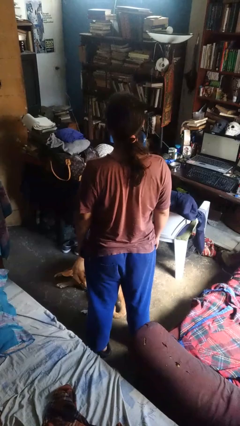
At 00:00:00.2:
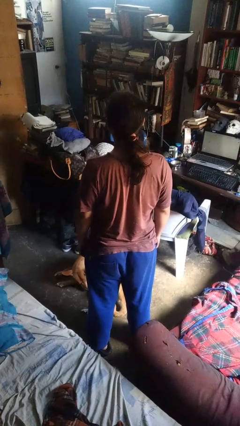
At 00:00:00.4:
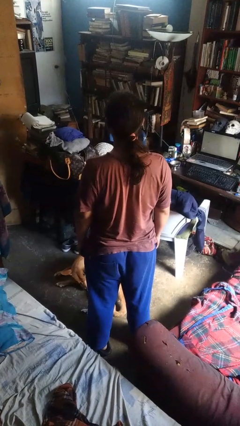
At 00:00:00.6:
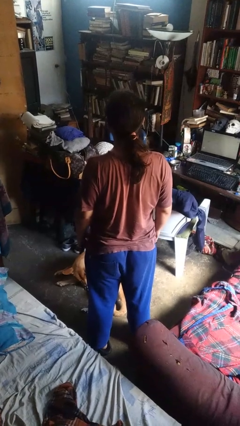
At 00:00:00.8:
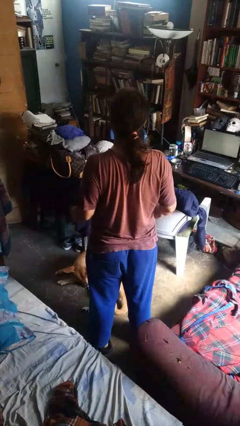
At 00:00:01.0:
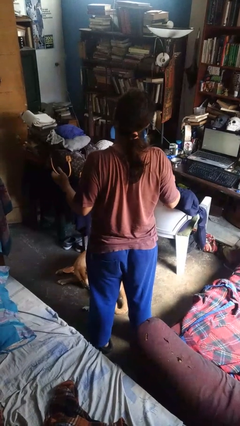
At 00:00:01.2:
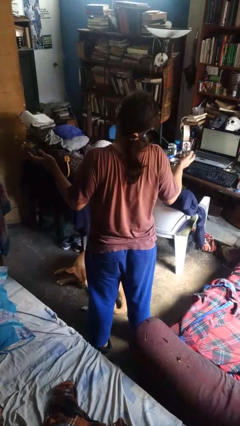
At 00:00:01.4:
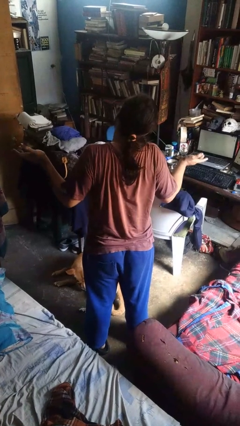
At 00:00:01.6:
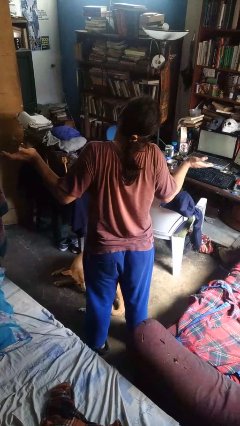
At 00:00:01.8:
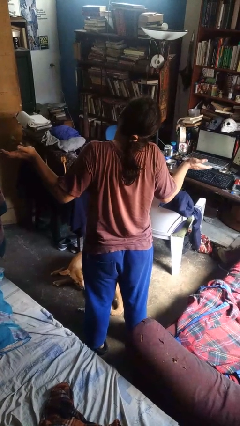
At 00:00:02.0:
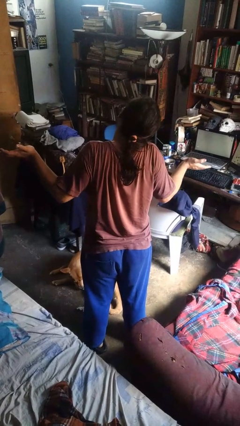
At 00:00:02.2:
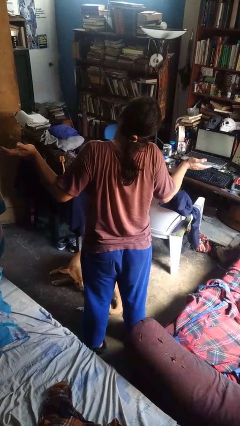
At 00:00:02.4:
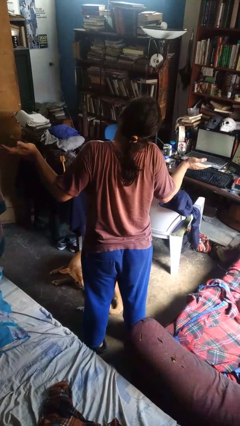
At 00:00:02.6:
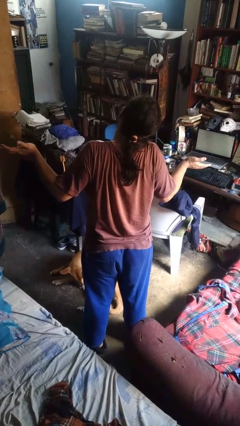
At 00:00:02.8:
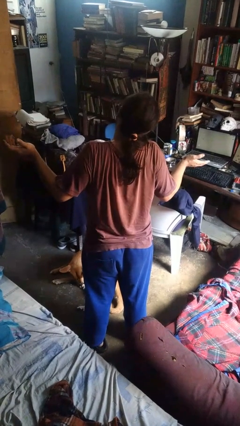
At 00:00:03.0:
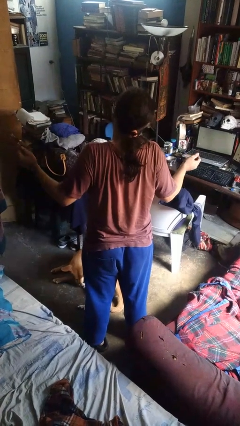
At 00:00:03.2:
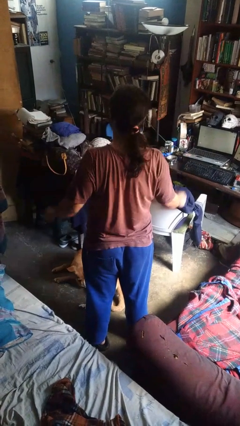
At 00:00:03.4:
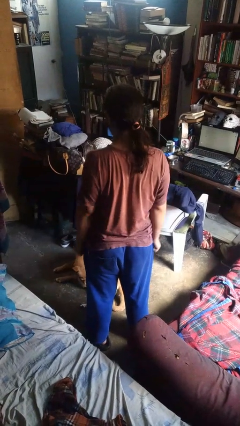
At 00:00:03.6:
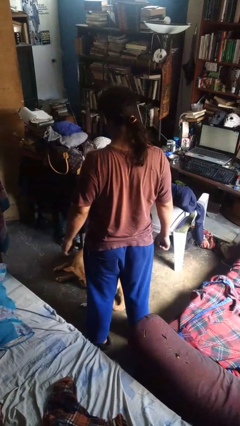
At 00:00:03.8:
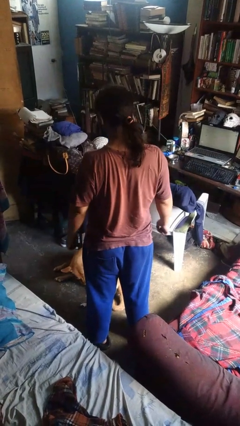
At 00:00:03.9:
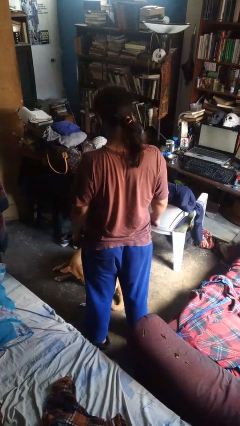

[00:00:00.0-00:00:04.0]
person shrugs

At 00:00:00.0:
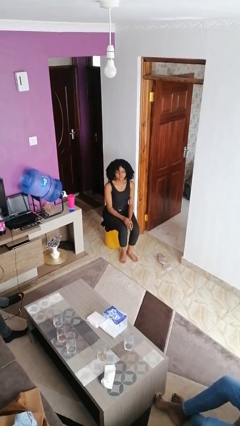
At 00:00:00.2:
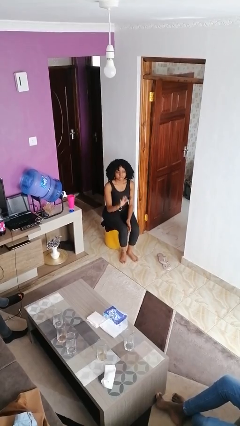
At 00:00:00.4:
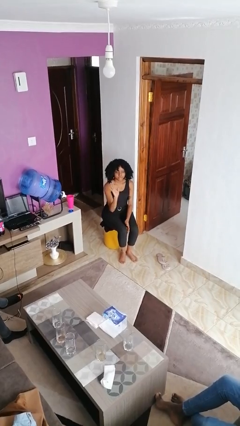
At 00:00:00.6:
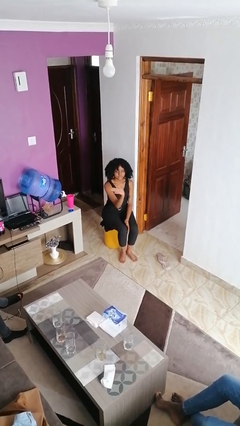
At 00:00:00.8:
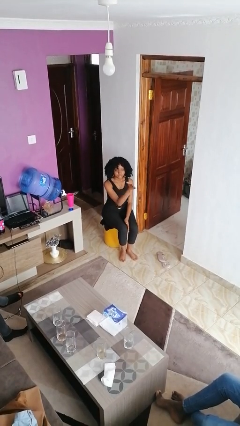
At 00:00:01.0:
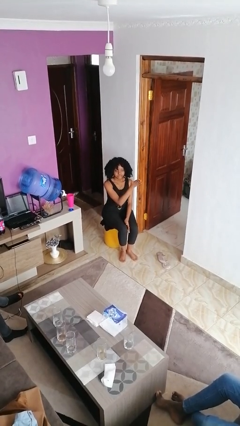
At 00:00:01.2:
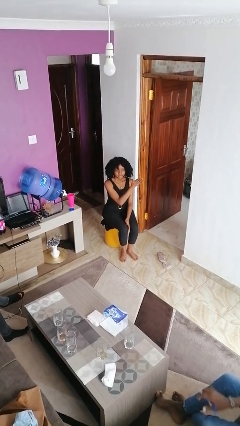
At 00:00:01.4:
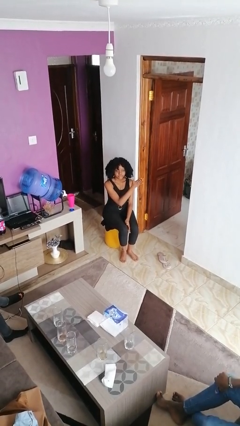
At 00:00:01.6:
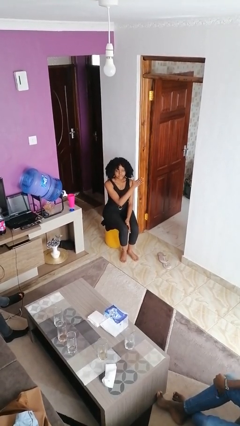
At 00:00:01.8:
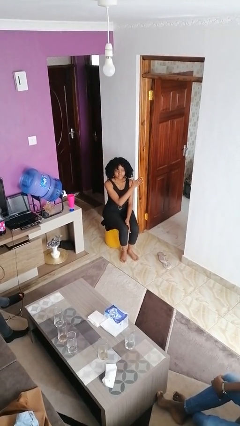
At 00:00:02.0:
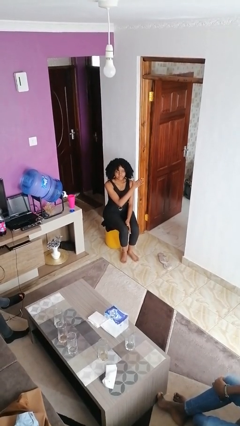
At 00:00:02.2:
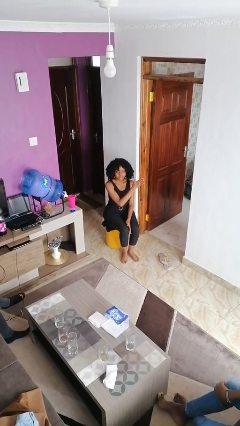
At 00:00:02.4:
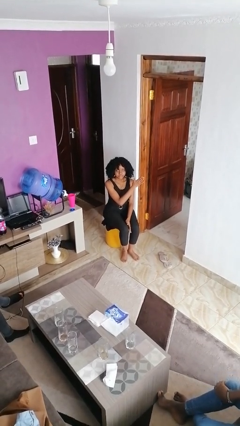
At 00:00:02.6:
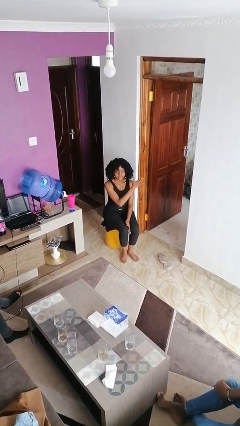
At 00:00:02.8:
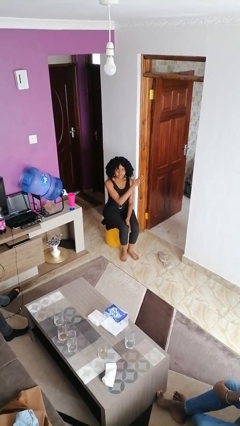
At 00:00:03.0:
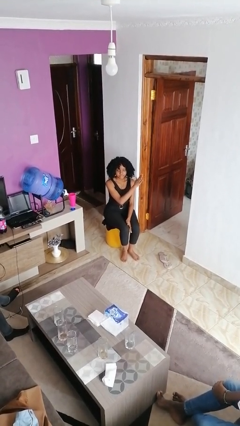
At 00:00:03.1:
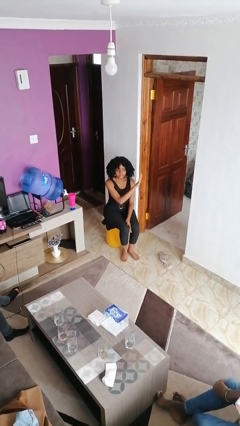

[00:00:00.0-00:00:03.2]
person gestures swipe left

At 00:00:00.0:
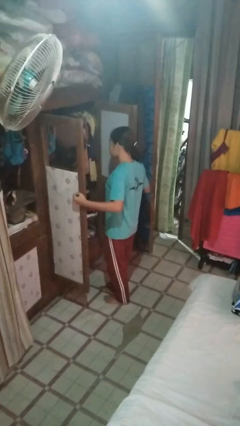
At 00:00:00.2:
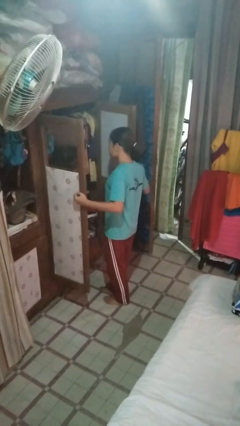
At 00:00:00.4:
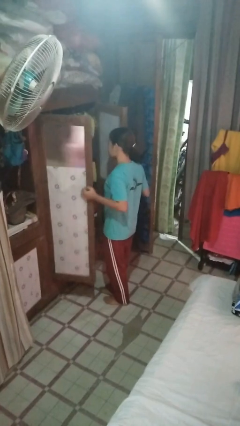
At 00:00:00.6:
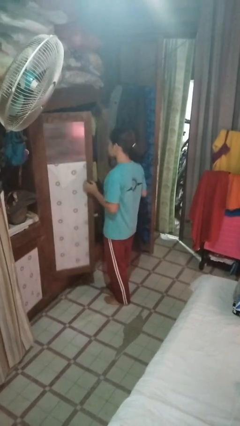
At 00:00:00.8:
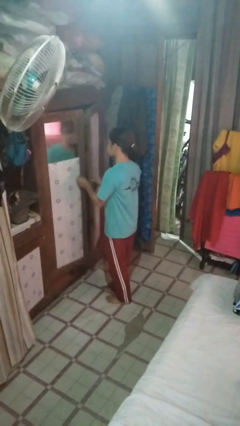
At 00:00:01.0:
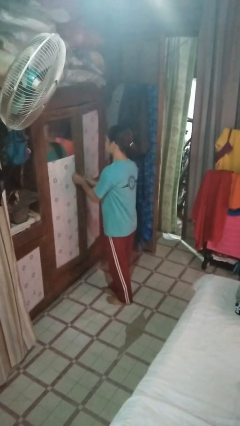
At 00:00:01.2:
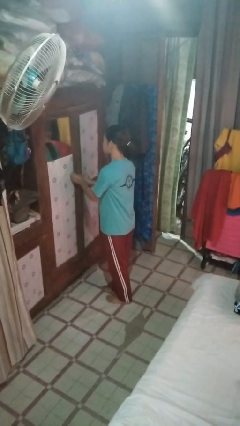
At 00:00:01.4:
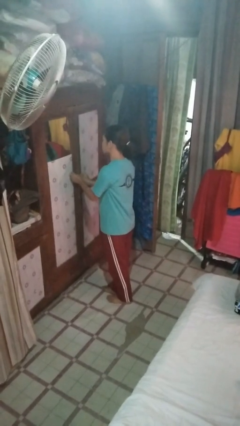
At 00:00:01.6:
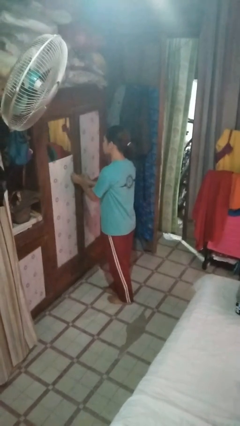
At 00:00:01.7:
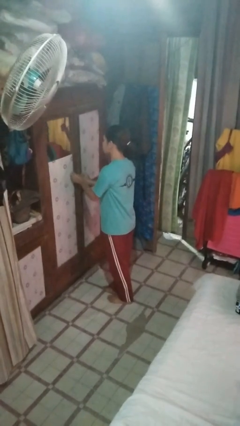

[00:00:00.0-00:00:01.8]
person closes closet door

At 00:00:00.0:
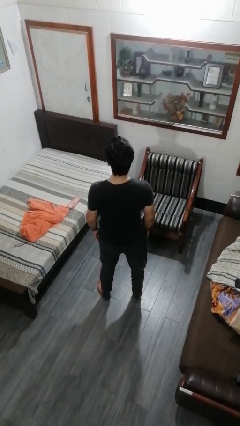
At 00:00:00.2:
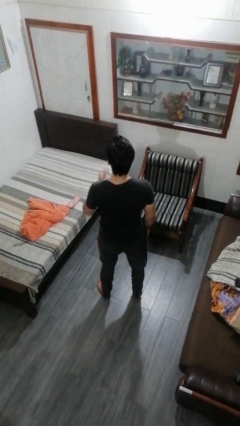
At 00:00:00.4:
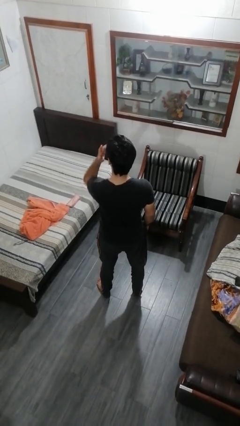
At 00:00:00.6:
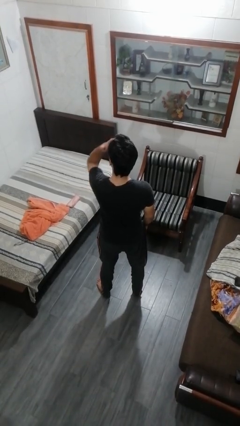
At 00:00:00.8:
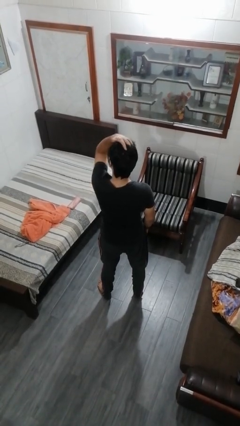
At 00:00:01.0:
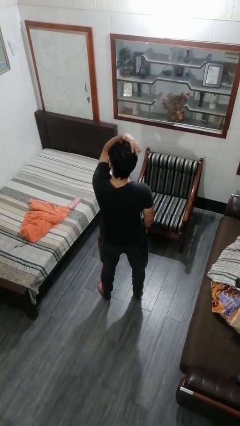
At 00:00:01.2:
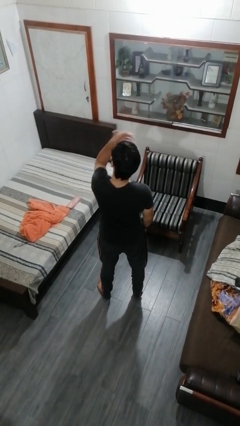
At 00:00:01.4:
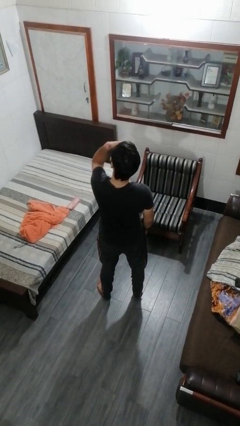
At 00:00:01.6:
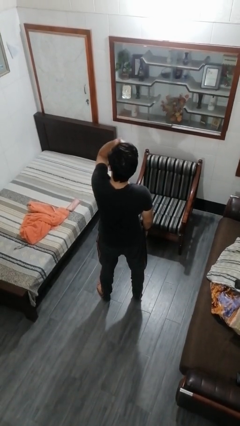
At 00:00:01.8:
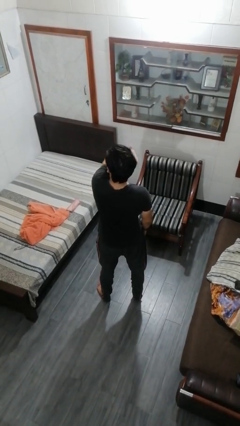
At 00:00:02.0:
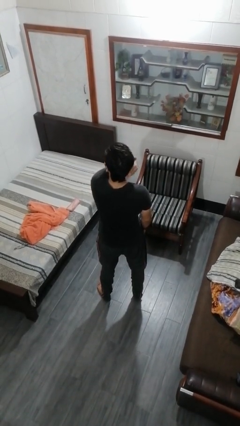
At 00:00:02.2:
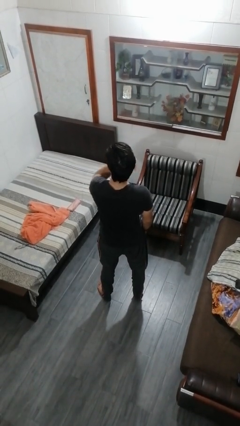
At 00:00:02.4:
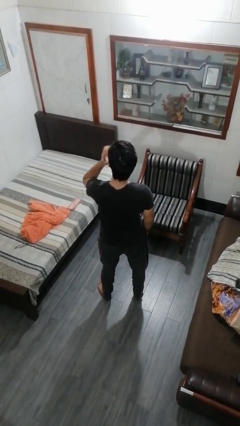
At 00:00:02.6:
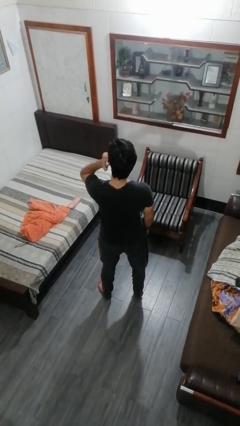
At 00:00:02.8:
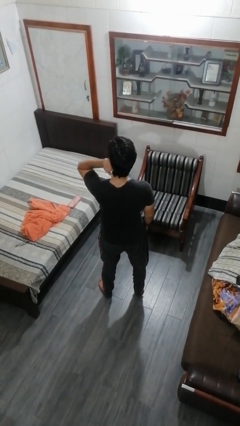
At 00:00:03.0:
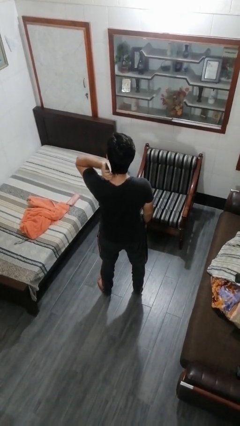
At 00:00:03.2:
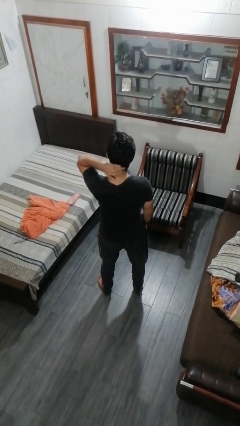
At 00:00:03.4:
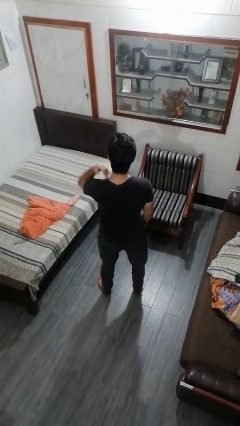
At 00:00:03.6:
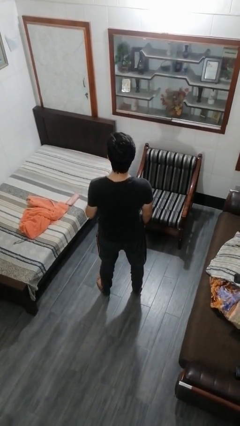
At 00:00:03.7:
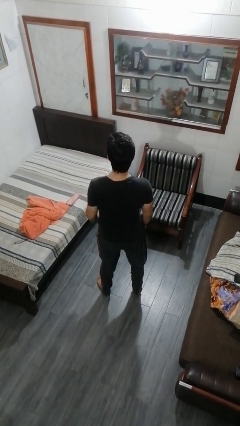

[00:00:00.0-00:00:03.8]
person strokes hair

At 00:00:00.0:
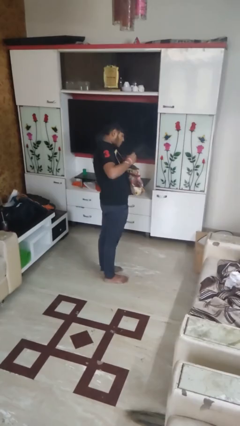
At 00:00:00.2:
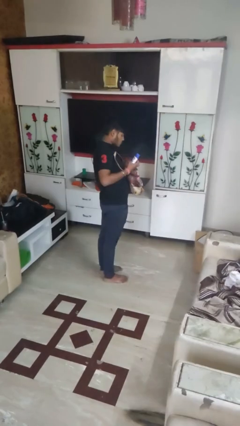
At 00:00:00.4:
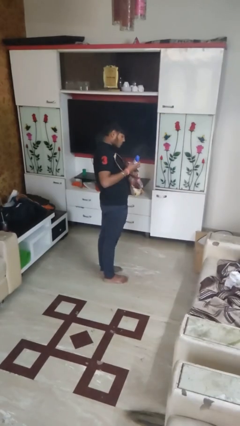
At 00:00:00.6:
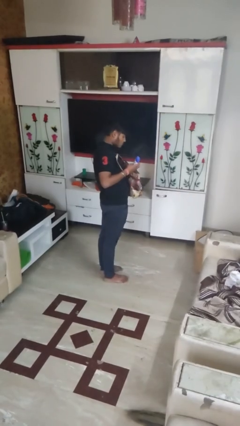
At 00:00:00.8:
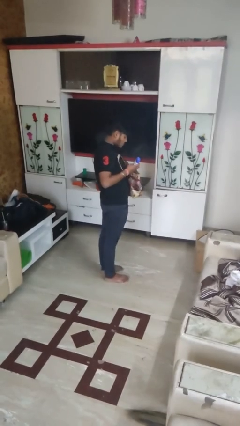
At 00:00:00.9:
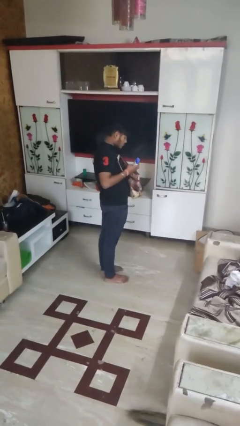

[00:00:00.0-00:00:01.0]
person takes object from purse

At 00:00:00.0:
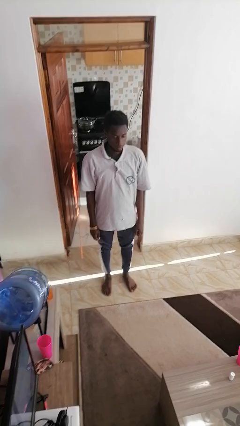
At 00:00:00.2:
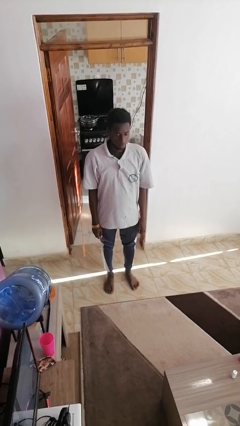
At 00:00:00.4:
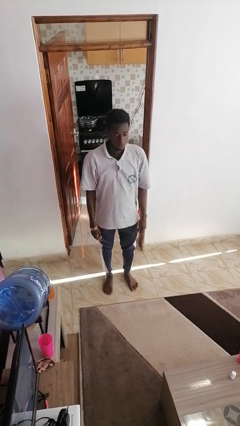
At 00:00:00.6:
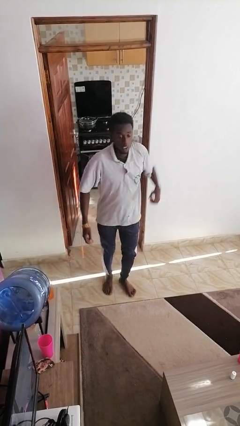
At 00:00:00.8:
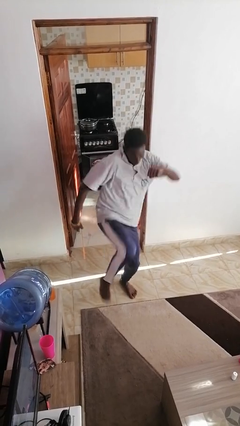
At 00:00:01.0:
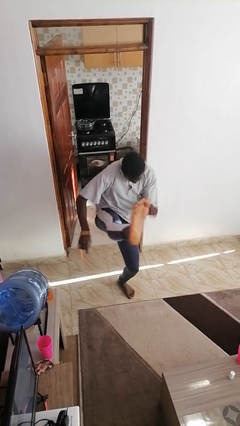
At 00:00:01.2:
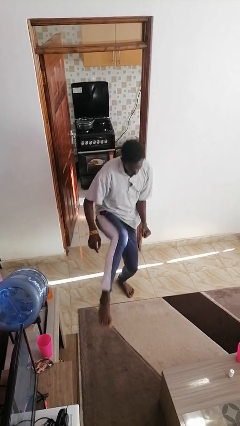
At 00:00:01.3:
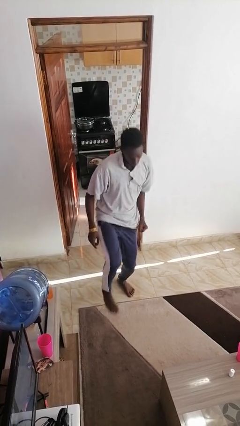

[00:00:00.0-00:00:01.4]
person karate kicks

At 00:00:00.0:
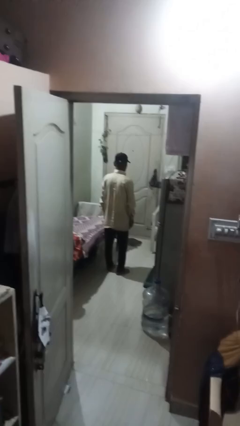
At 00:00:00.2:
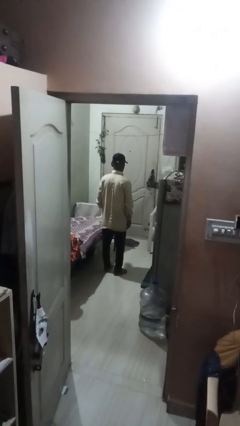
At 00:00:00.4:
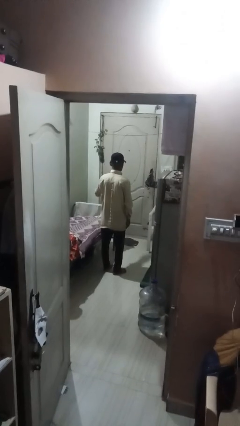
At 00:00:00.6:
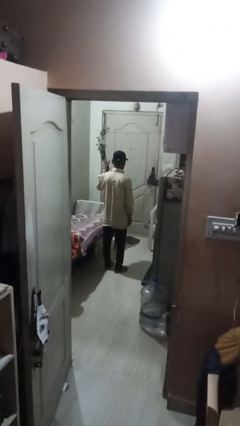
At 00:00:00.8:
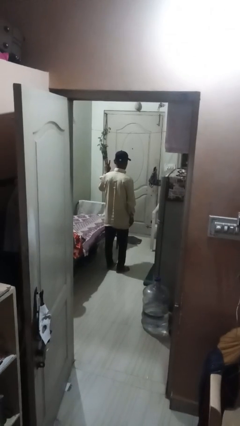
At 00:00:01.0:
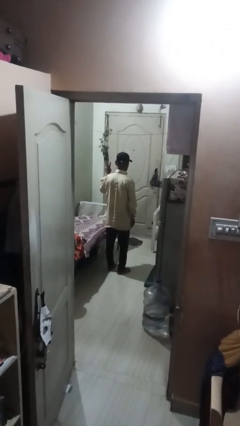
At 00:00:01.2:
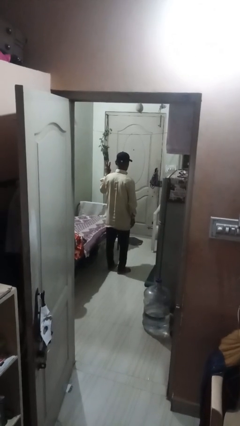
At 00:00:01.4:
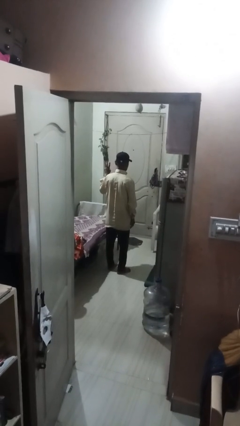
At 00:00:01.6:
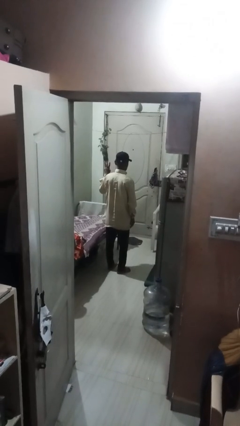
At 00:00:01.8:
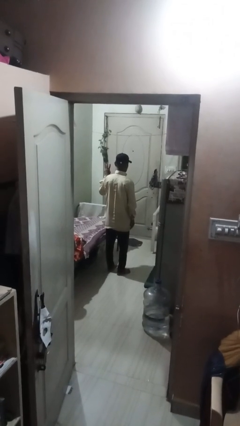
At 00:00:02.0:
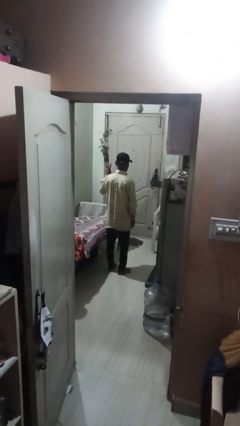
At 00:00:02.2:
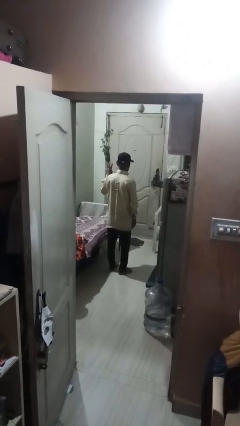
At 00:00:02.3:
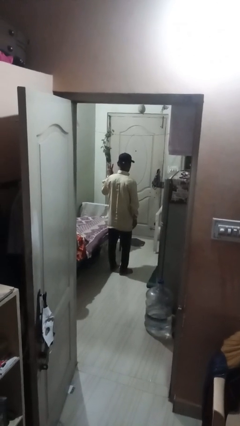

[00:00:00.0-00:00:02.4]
person gestures number three
